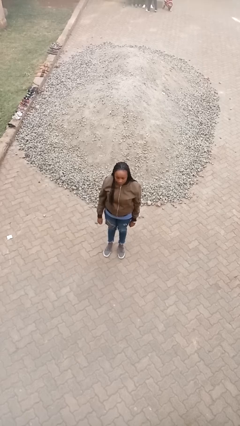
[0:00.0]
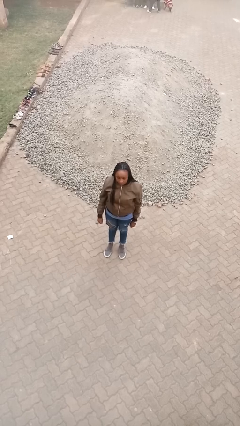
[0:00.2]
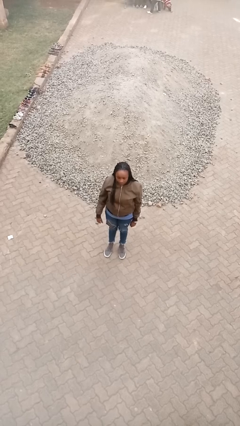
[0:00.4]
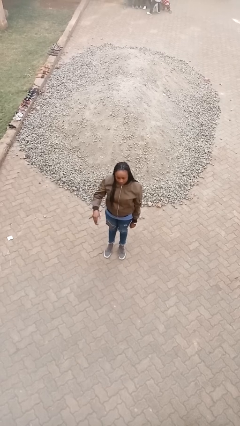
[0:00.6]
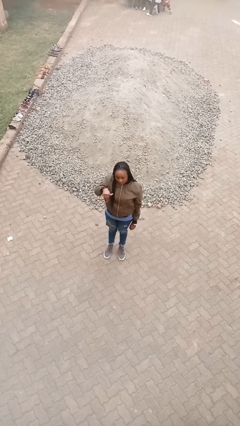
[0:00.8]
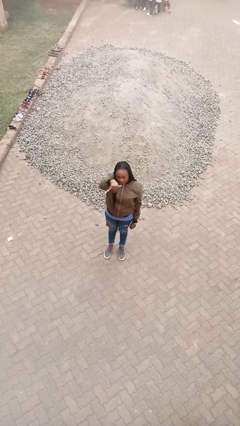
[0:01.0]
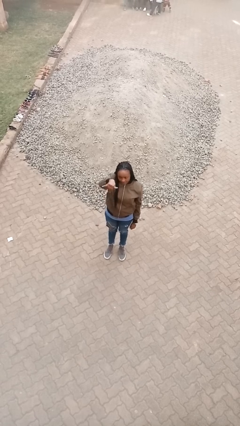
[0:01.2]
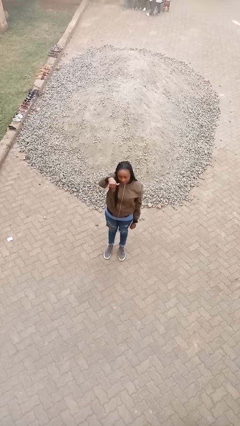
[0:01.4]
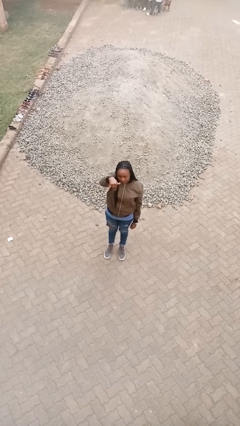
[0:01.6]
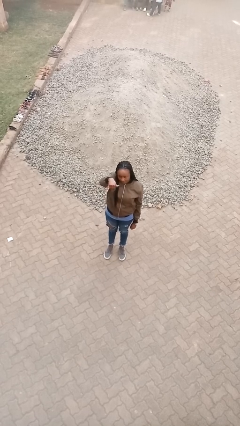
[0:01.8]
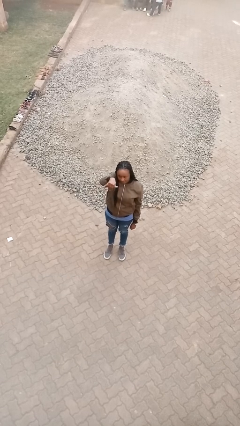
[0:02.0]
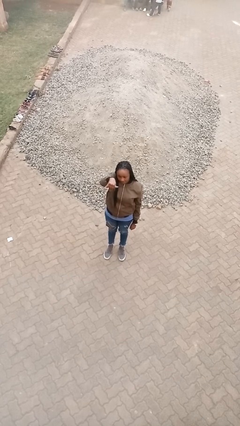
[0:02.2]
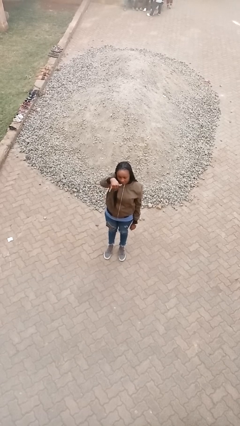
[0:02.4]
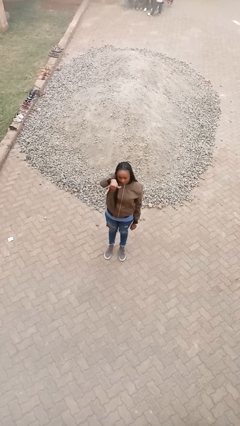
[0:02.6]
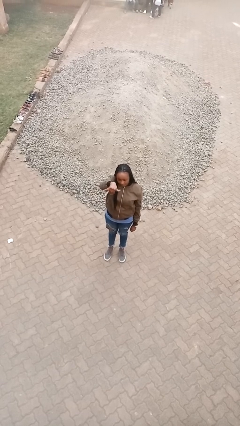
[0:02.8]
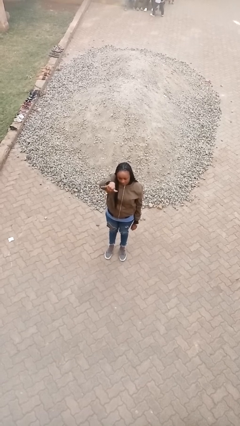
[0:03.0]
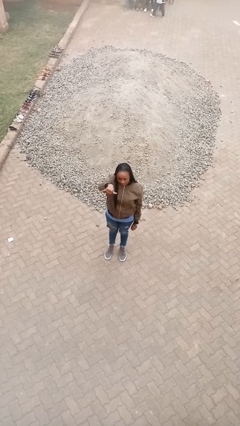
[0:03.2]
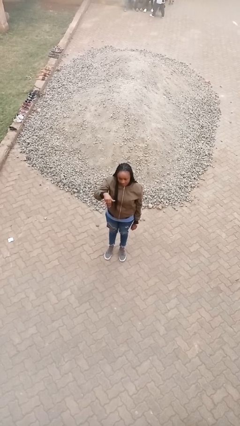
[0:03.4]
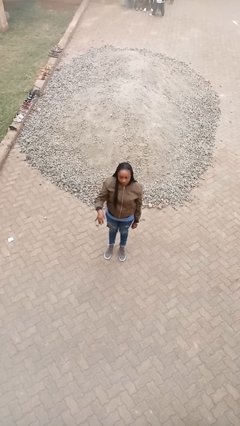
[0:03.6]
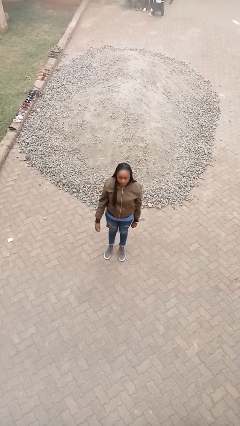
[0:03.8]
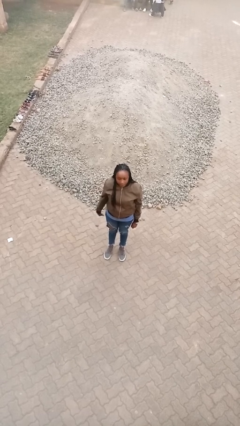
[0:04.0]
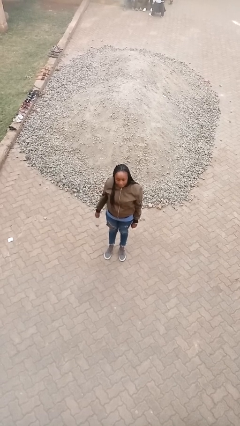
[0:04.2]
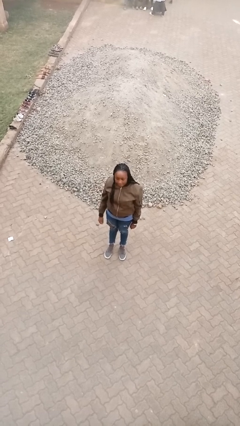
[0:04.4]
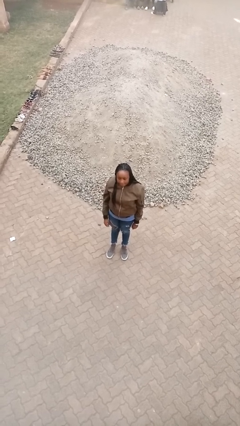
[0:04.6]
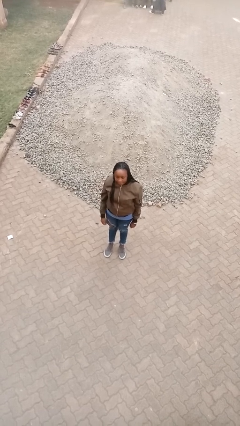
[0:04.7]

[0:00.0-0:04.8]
person gestures hang loose

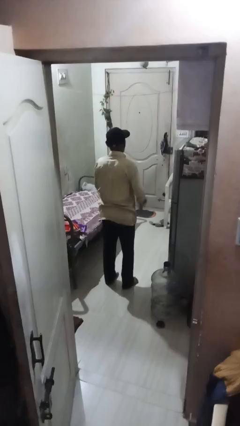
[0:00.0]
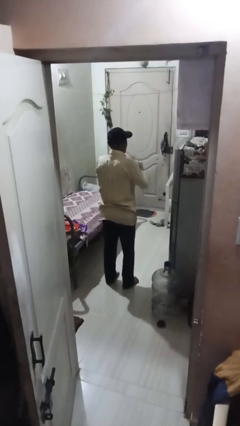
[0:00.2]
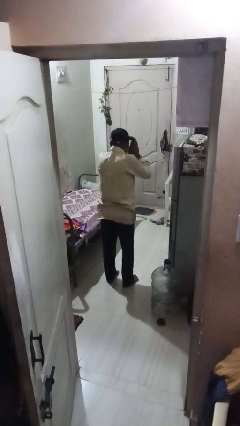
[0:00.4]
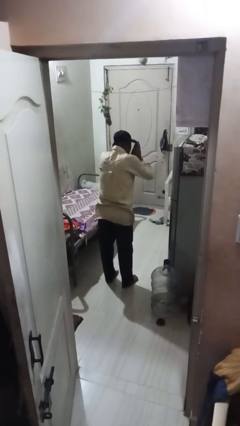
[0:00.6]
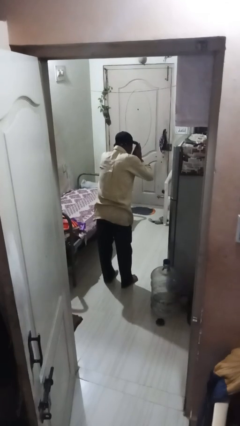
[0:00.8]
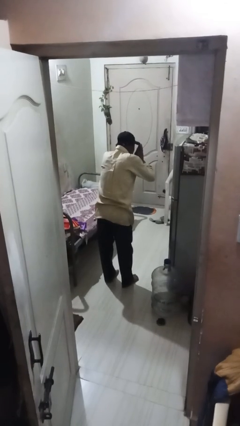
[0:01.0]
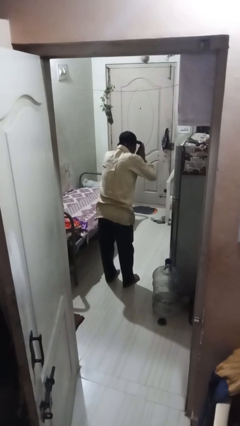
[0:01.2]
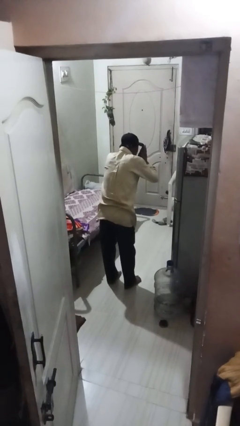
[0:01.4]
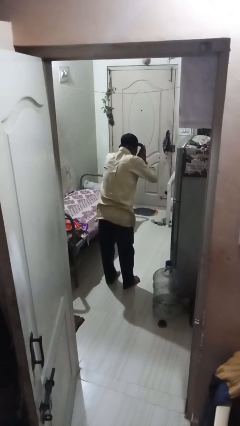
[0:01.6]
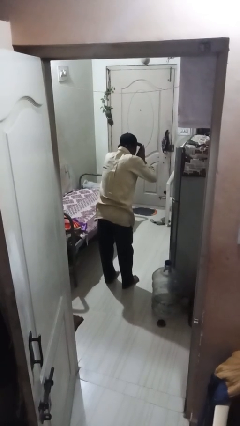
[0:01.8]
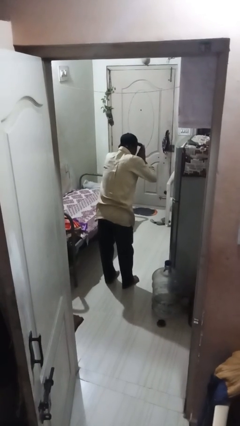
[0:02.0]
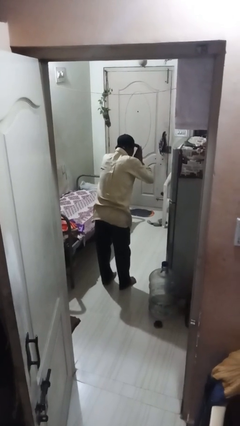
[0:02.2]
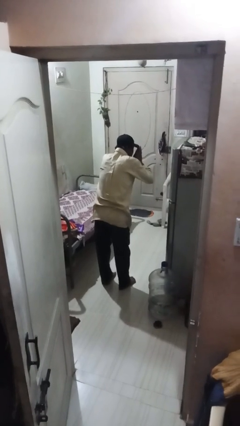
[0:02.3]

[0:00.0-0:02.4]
person prays

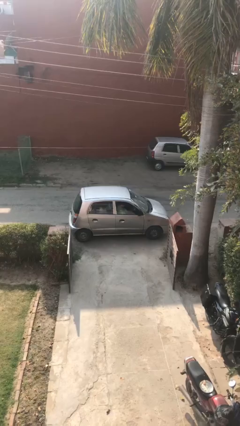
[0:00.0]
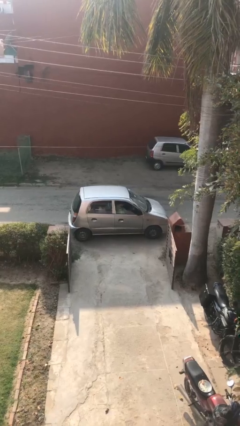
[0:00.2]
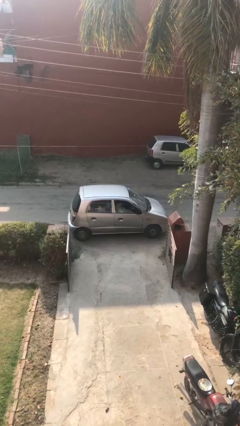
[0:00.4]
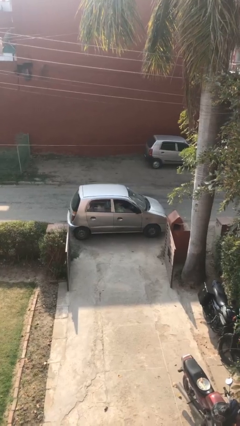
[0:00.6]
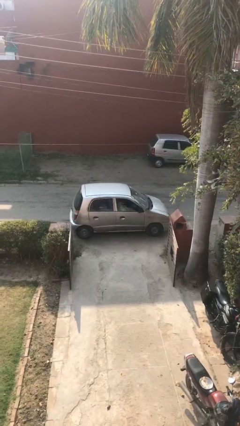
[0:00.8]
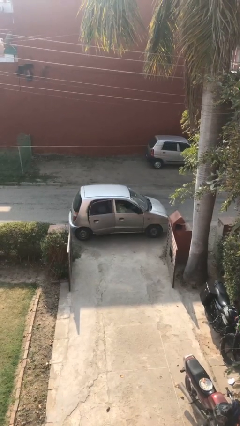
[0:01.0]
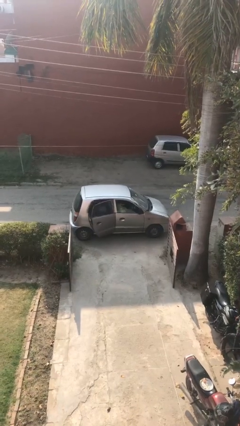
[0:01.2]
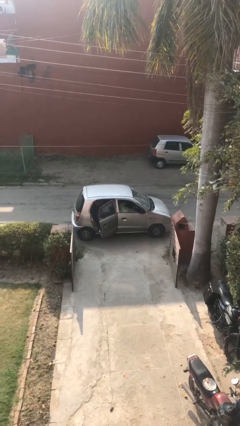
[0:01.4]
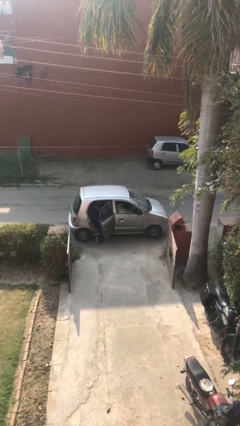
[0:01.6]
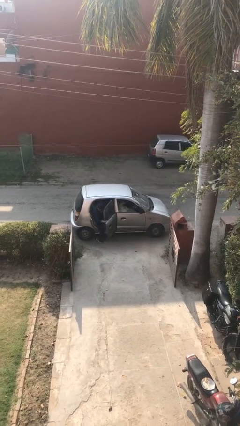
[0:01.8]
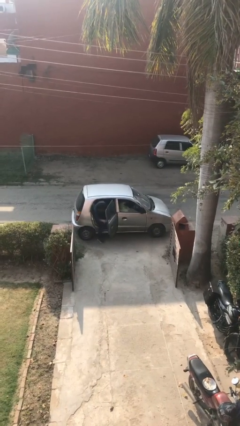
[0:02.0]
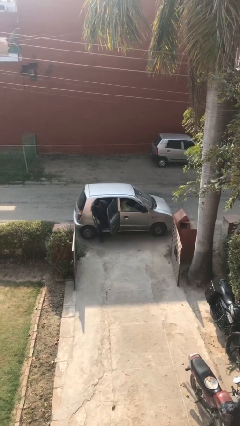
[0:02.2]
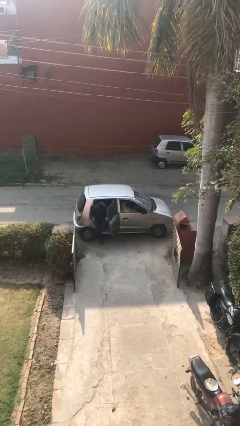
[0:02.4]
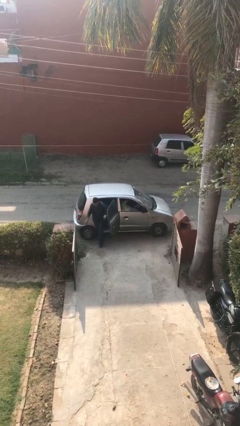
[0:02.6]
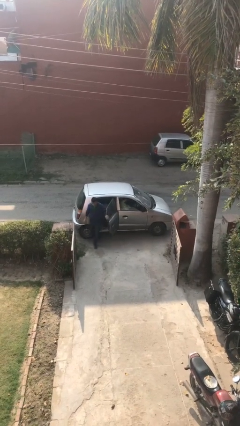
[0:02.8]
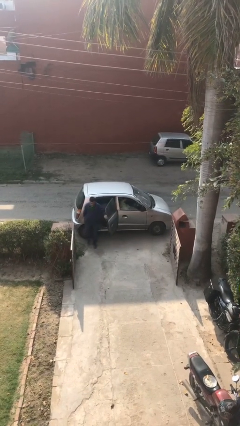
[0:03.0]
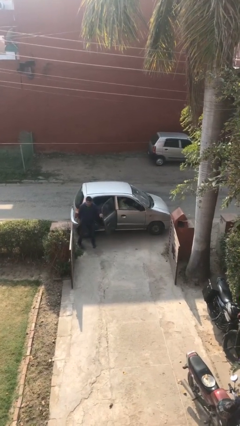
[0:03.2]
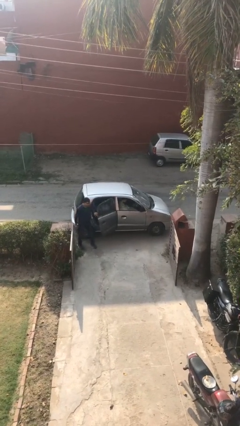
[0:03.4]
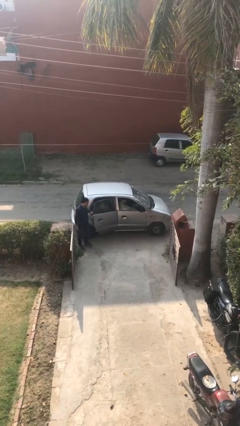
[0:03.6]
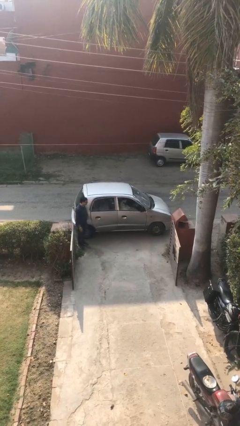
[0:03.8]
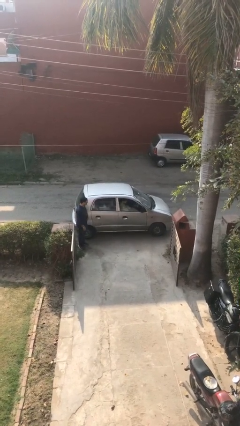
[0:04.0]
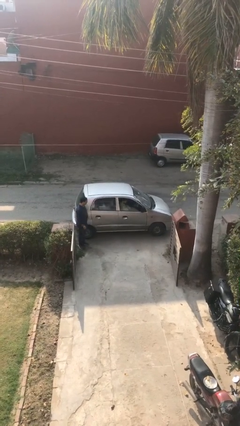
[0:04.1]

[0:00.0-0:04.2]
car drops off person

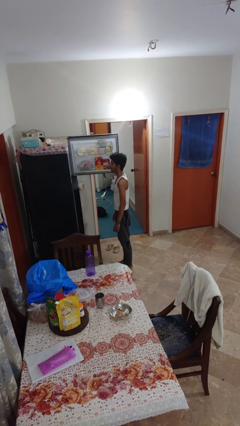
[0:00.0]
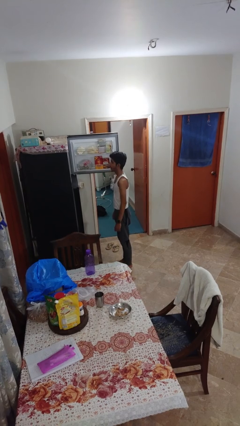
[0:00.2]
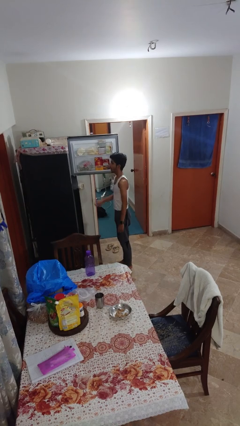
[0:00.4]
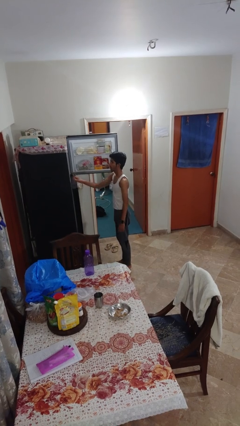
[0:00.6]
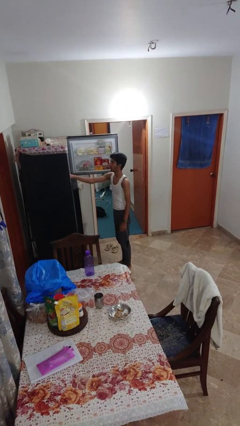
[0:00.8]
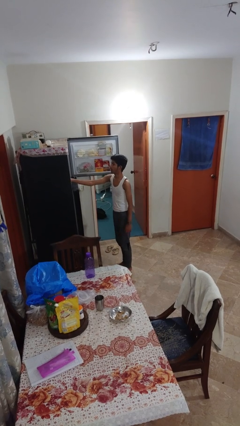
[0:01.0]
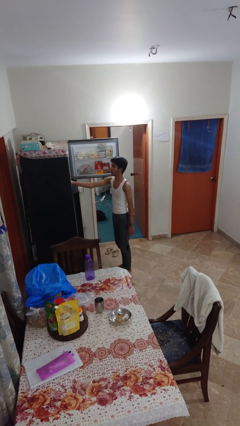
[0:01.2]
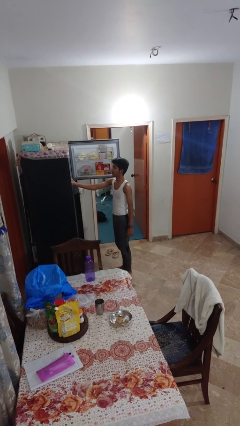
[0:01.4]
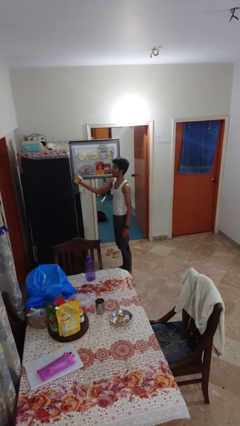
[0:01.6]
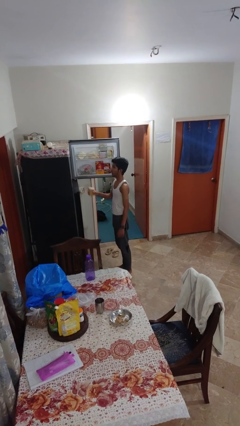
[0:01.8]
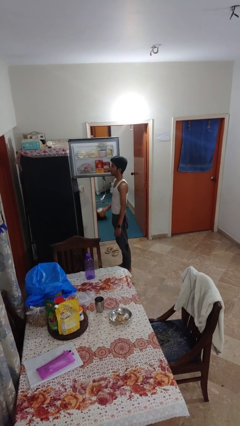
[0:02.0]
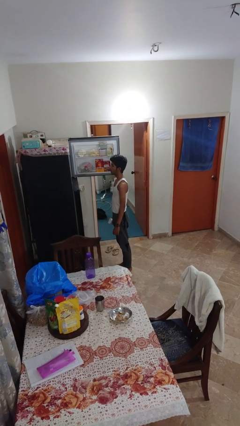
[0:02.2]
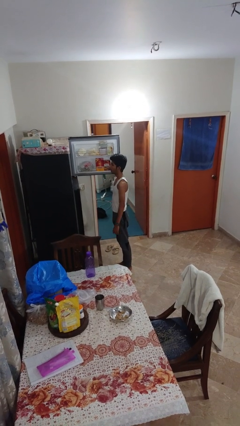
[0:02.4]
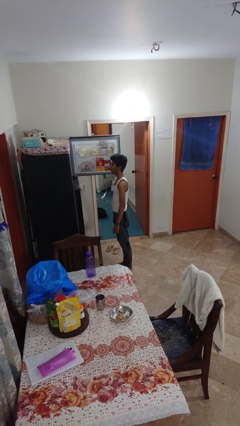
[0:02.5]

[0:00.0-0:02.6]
person takes object from refrigerator

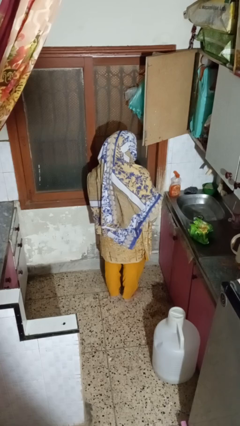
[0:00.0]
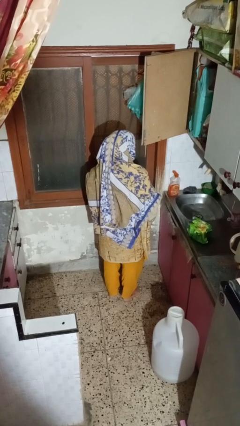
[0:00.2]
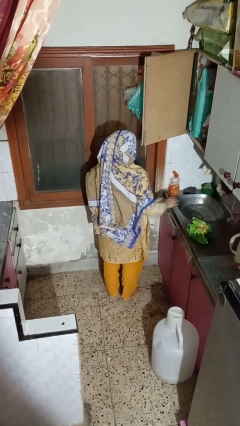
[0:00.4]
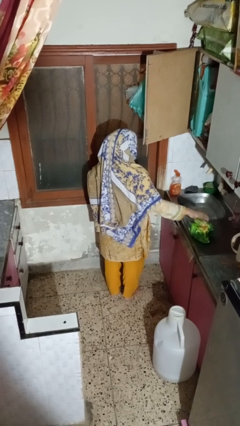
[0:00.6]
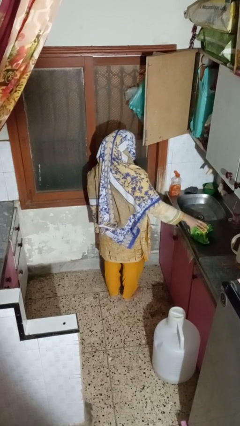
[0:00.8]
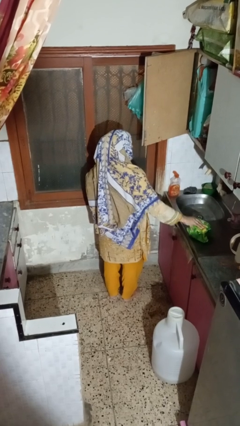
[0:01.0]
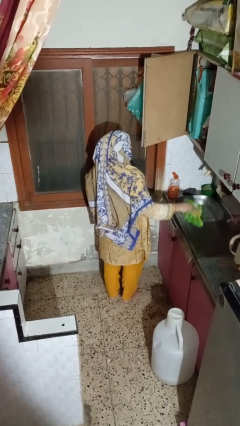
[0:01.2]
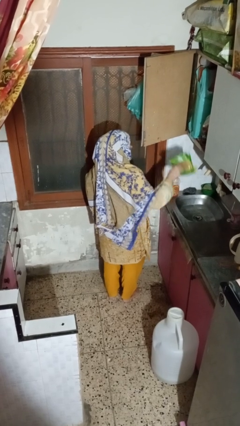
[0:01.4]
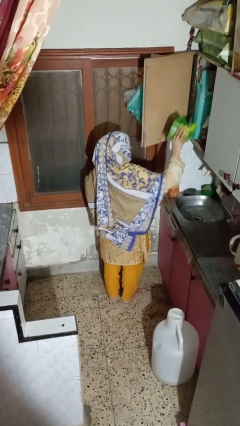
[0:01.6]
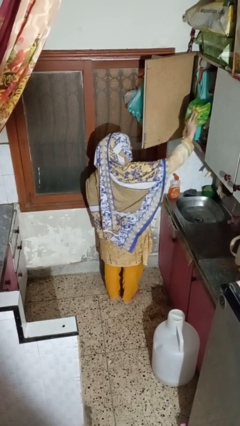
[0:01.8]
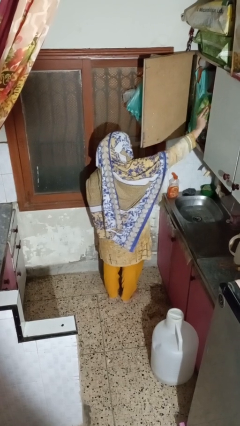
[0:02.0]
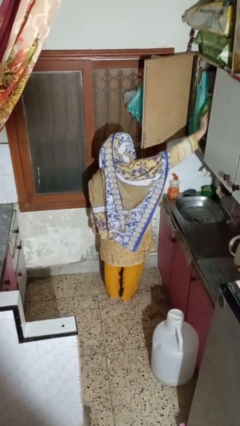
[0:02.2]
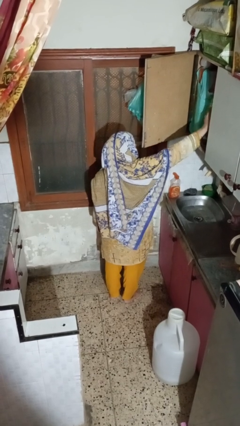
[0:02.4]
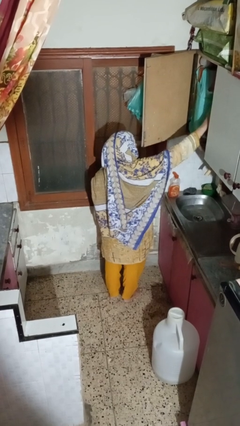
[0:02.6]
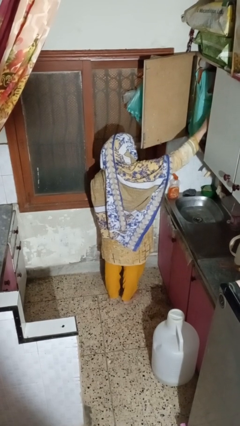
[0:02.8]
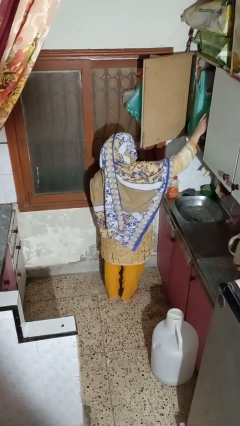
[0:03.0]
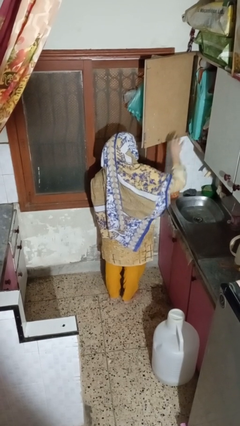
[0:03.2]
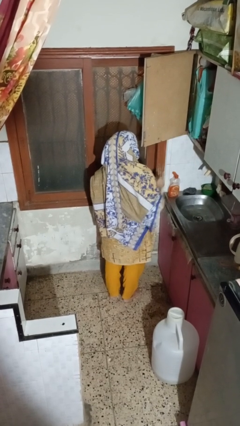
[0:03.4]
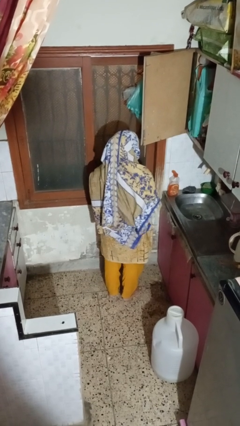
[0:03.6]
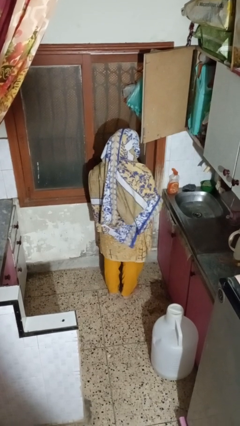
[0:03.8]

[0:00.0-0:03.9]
person puts object in cabinet
